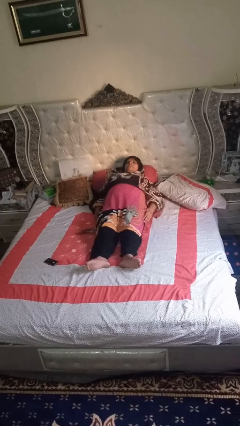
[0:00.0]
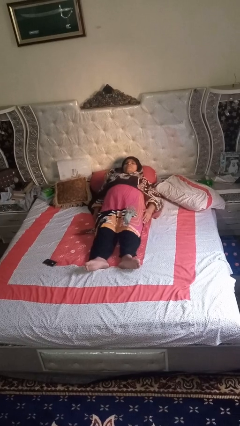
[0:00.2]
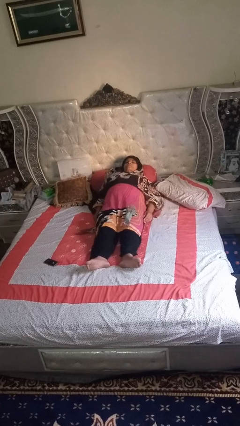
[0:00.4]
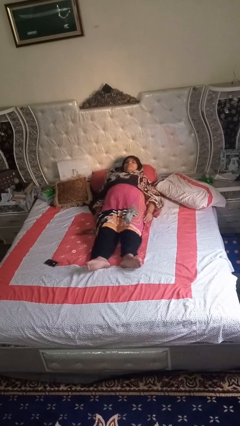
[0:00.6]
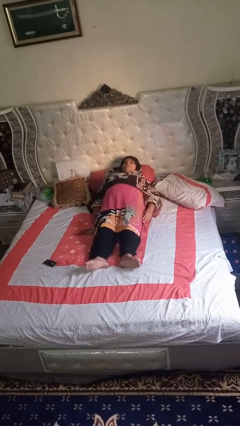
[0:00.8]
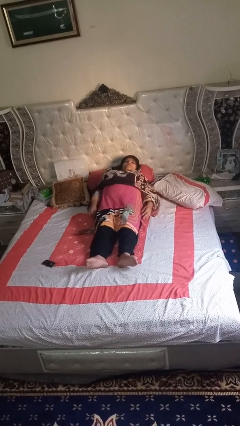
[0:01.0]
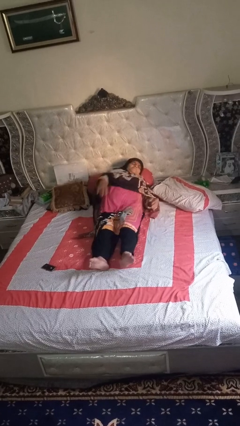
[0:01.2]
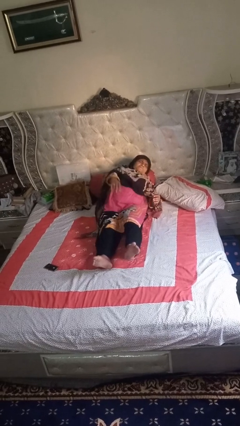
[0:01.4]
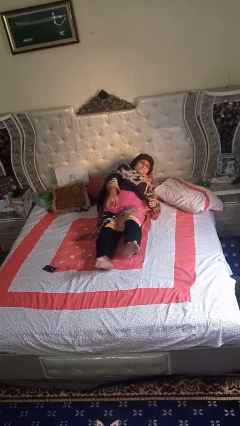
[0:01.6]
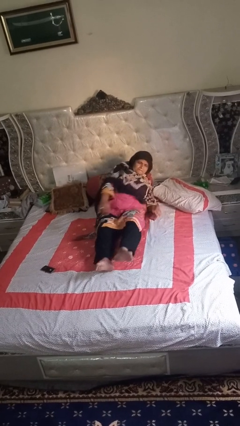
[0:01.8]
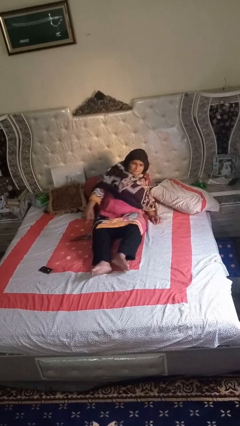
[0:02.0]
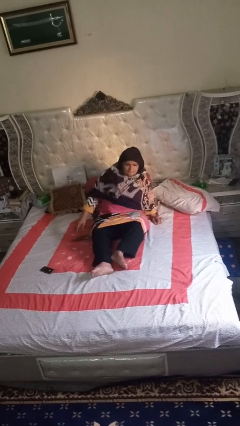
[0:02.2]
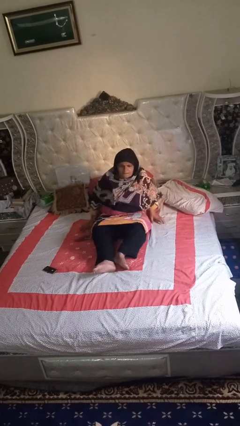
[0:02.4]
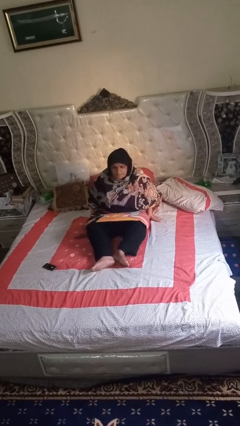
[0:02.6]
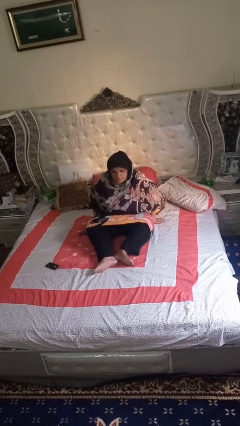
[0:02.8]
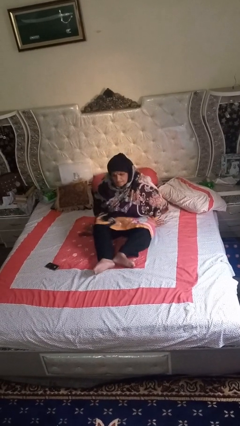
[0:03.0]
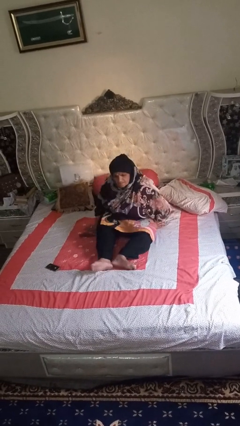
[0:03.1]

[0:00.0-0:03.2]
person stands up

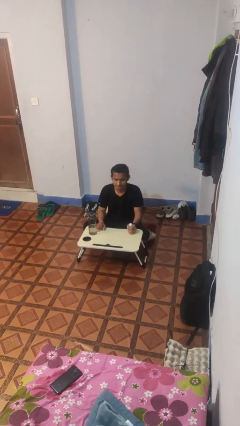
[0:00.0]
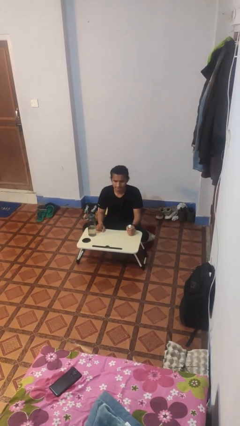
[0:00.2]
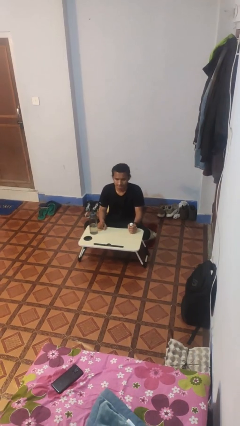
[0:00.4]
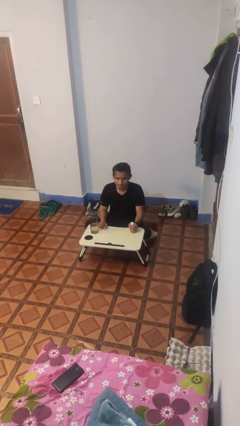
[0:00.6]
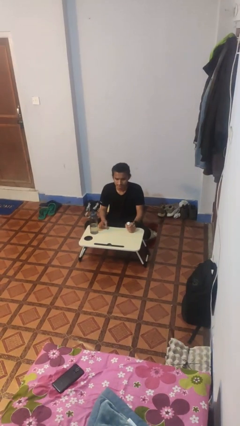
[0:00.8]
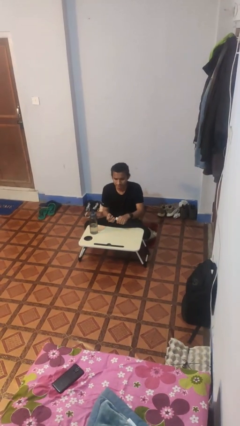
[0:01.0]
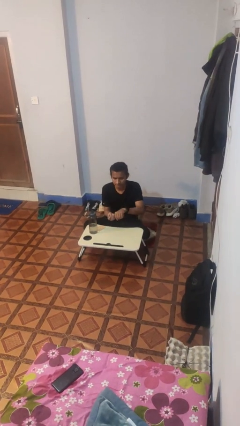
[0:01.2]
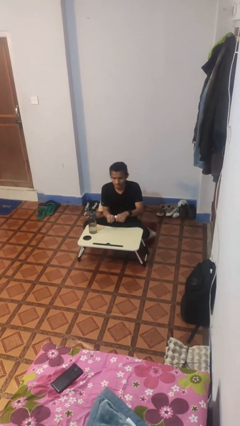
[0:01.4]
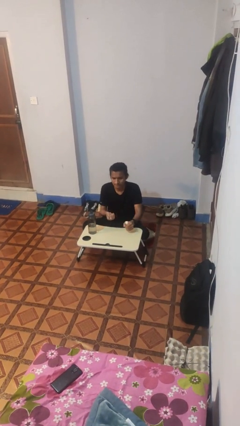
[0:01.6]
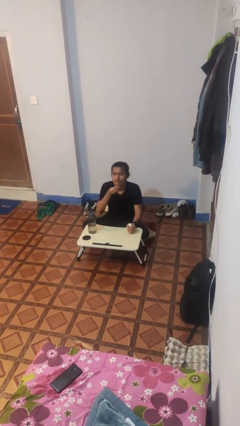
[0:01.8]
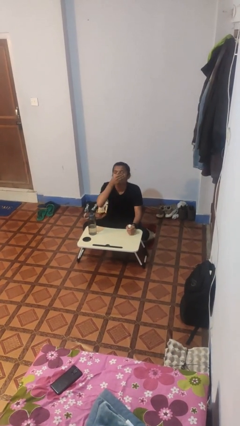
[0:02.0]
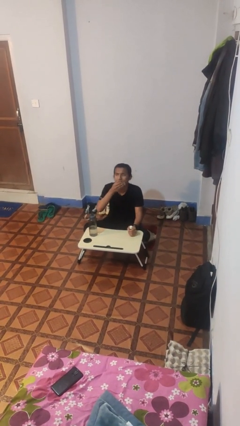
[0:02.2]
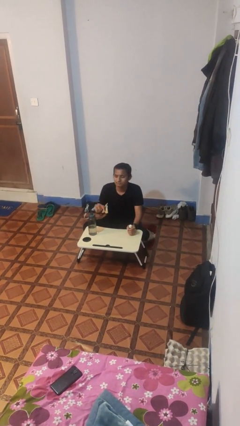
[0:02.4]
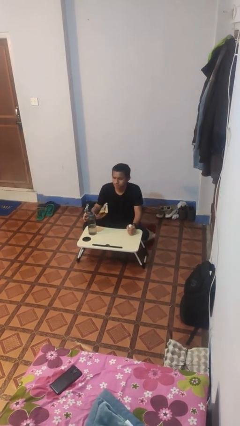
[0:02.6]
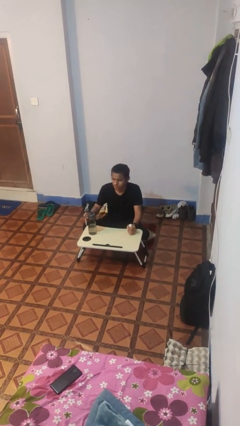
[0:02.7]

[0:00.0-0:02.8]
person takes medicine pills

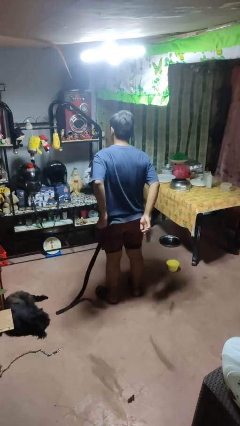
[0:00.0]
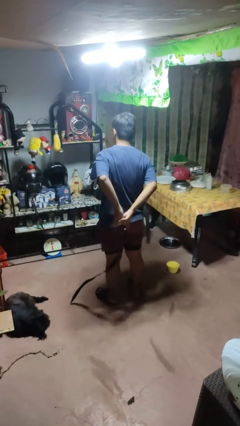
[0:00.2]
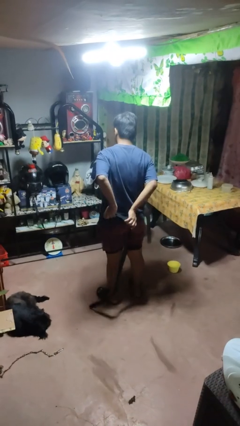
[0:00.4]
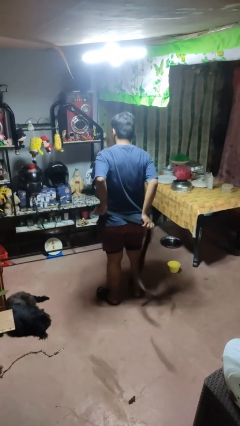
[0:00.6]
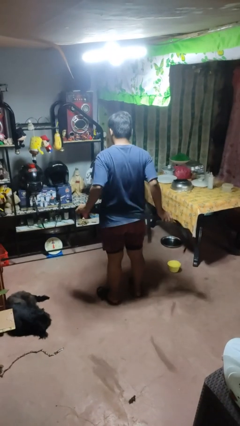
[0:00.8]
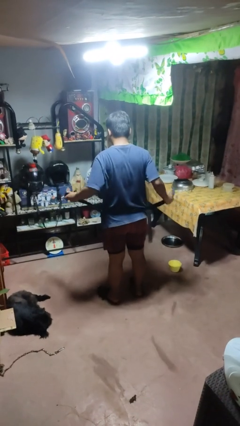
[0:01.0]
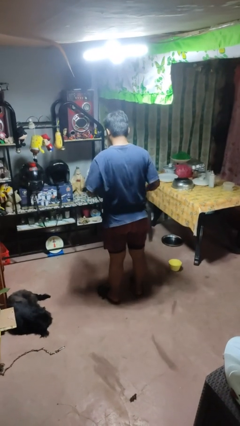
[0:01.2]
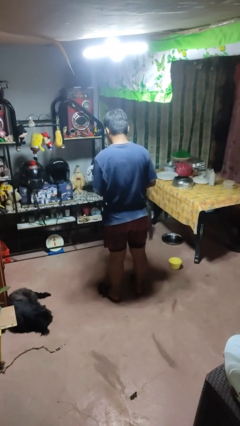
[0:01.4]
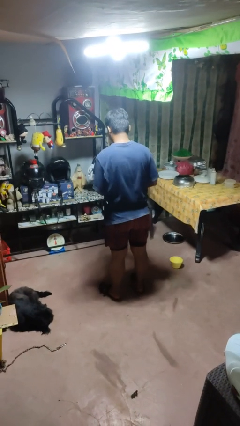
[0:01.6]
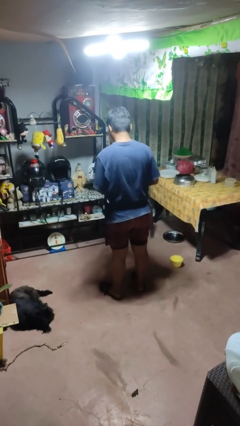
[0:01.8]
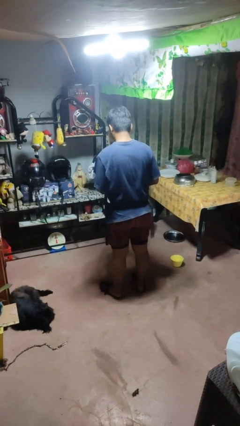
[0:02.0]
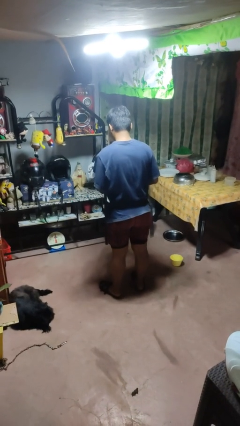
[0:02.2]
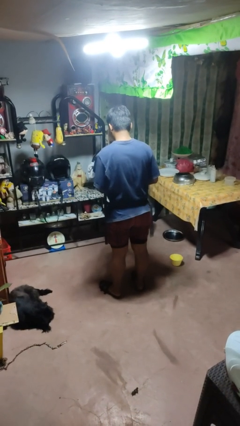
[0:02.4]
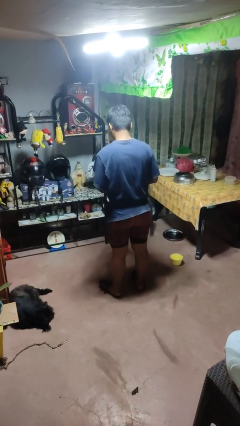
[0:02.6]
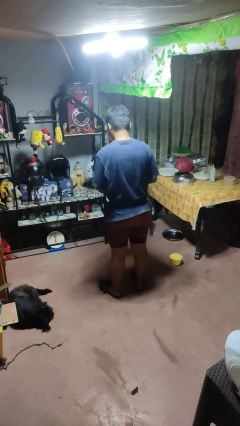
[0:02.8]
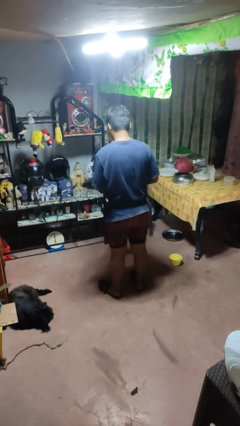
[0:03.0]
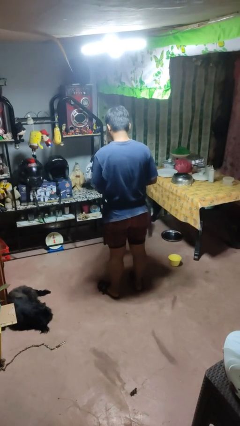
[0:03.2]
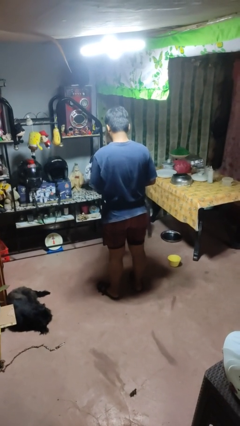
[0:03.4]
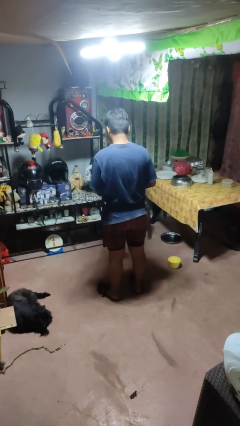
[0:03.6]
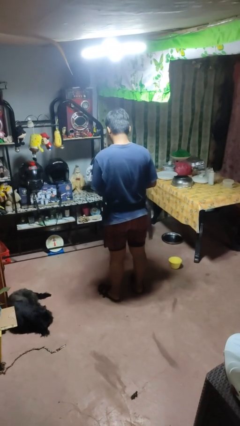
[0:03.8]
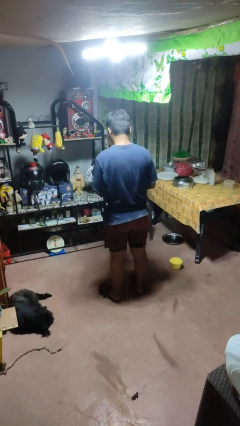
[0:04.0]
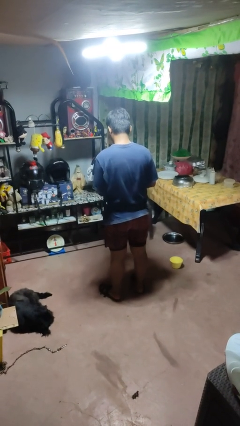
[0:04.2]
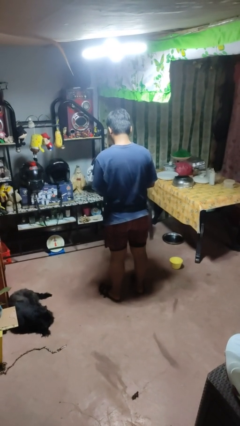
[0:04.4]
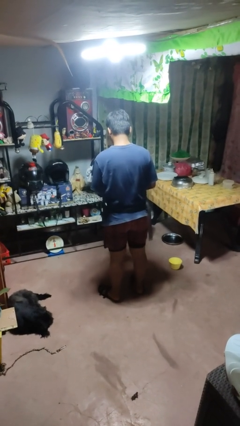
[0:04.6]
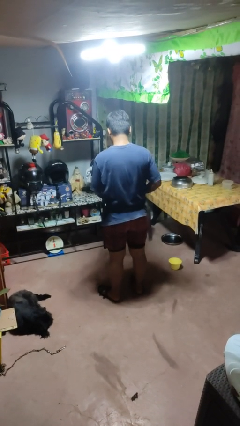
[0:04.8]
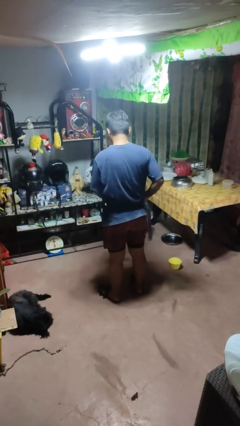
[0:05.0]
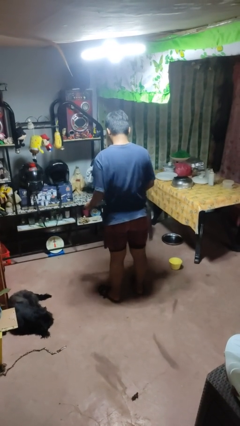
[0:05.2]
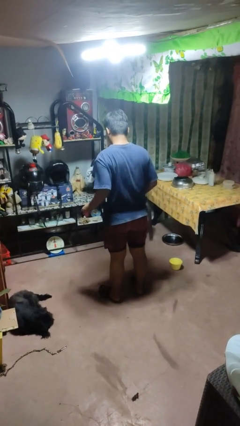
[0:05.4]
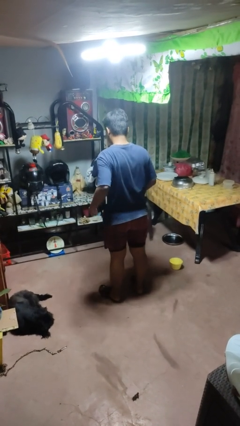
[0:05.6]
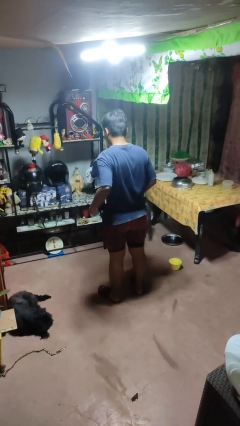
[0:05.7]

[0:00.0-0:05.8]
person puts on belt

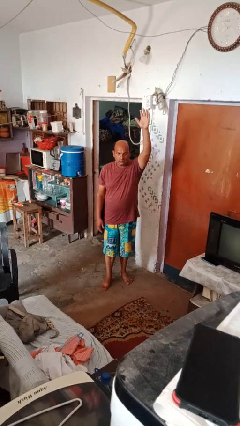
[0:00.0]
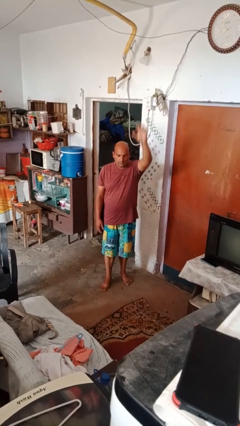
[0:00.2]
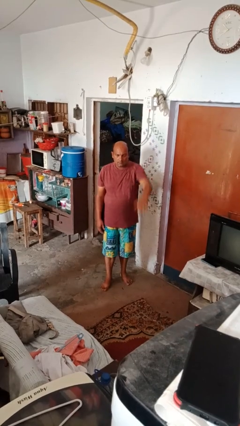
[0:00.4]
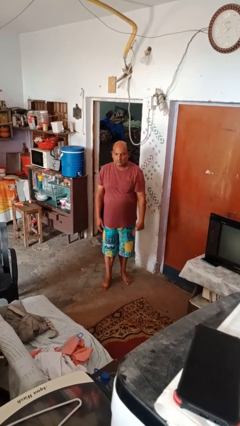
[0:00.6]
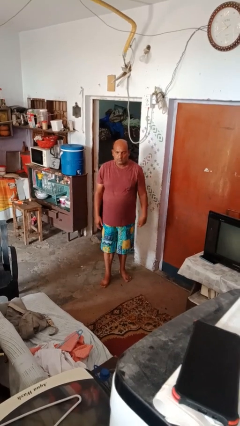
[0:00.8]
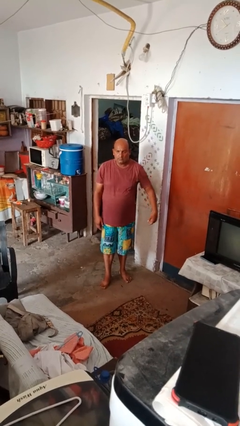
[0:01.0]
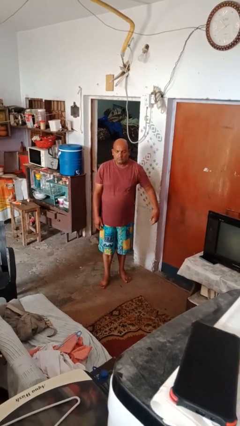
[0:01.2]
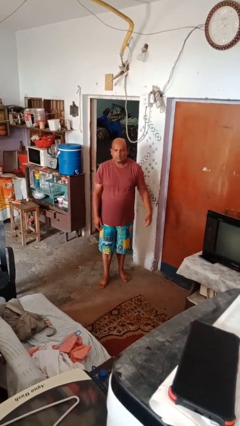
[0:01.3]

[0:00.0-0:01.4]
person gestures swipe down

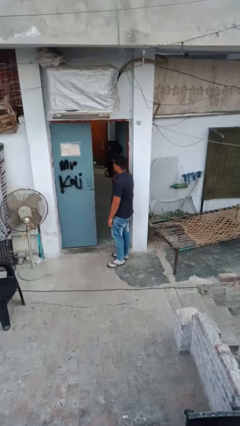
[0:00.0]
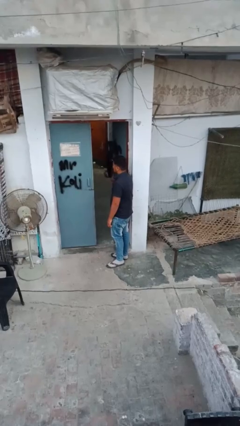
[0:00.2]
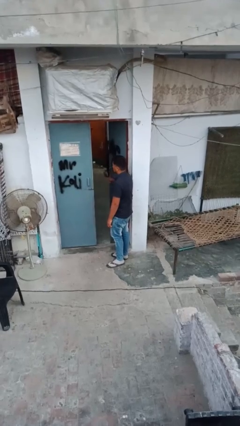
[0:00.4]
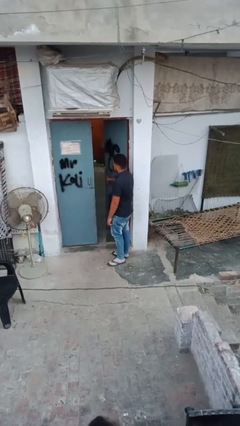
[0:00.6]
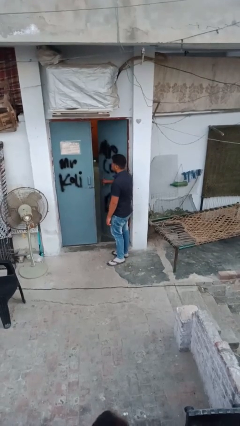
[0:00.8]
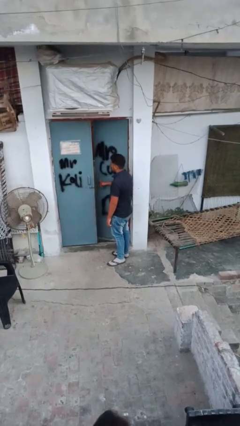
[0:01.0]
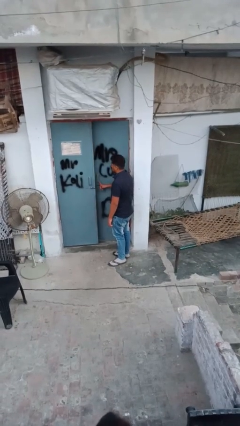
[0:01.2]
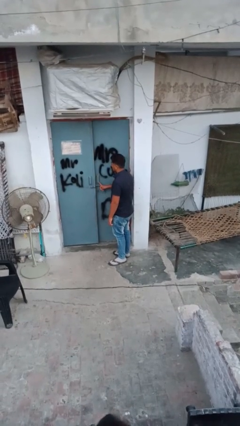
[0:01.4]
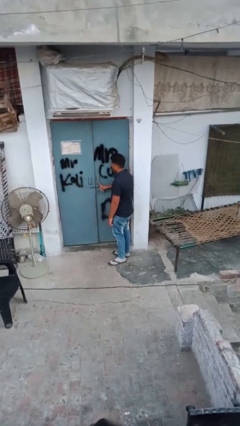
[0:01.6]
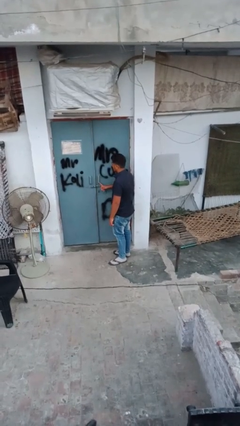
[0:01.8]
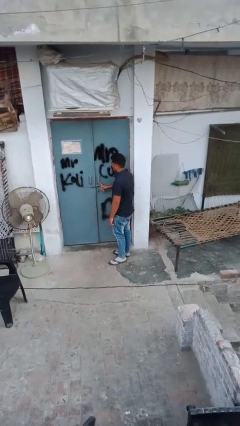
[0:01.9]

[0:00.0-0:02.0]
person closes facility door

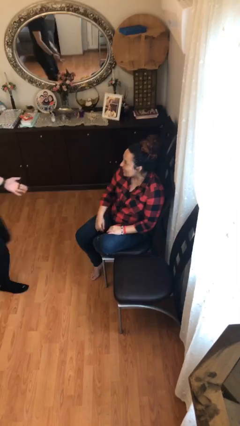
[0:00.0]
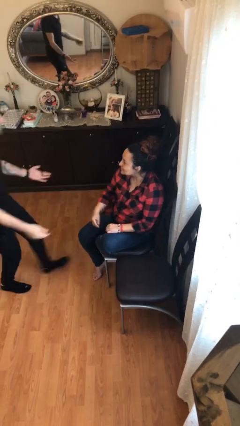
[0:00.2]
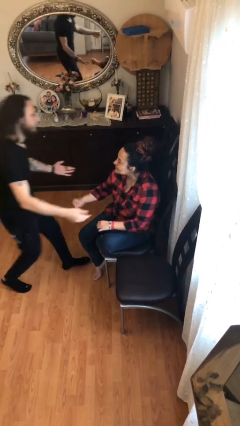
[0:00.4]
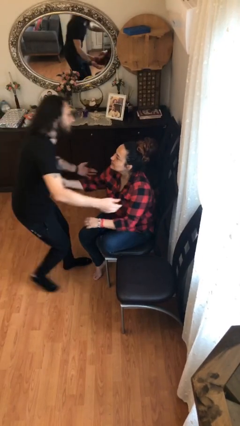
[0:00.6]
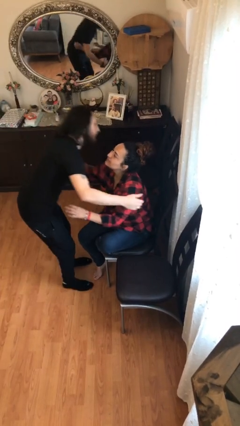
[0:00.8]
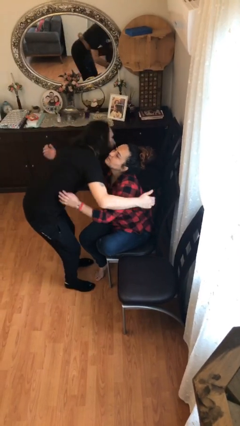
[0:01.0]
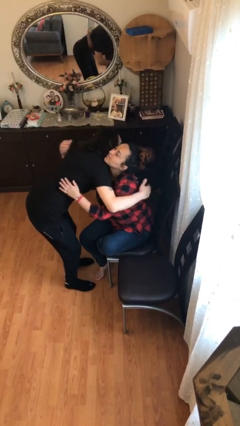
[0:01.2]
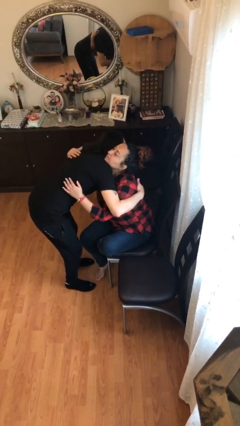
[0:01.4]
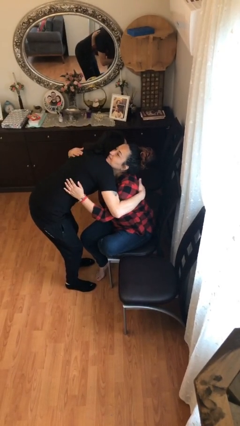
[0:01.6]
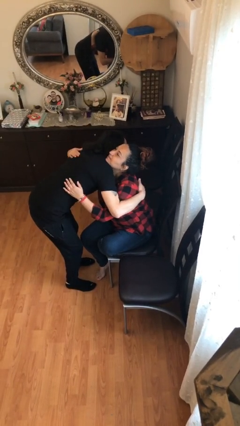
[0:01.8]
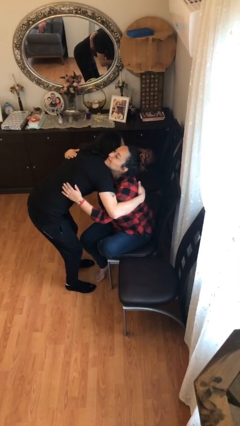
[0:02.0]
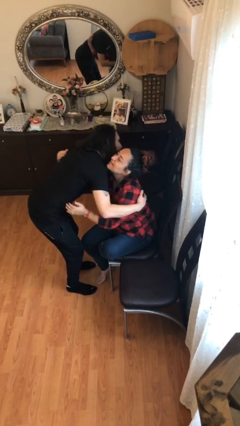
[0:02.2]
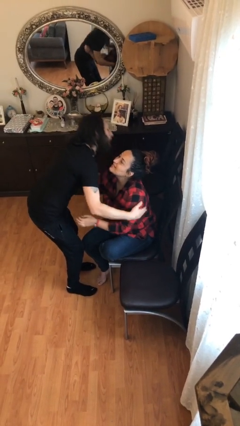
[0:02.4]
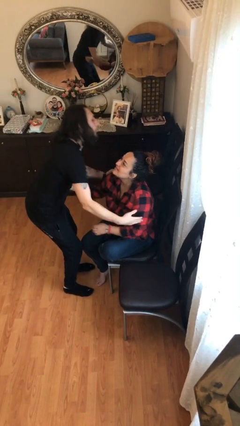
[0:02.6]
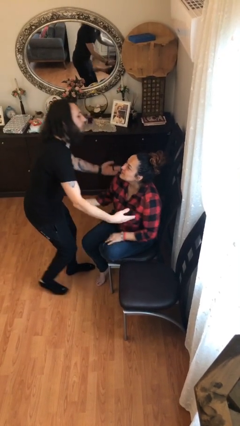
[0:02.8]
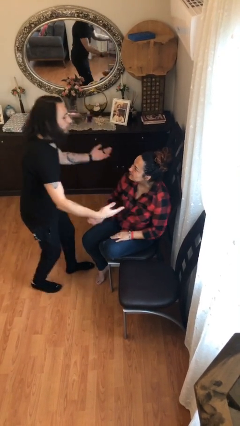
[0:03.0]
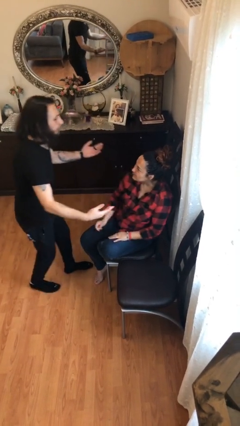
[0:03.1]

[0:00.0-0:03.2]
person embraces person
